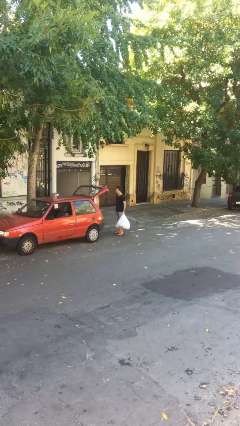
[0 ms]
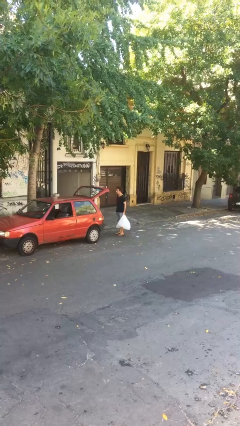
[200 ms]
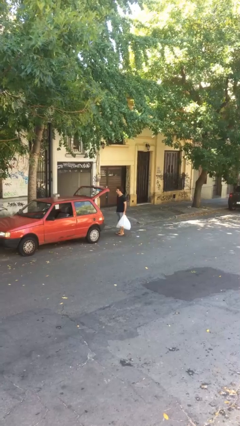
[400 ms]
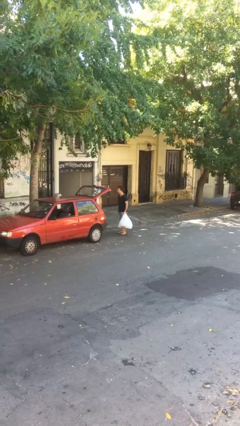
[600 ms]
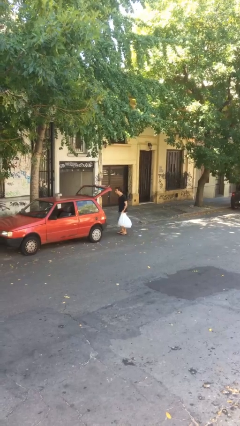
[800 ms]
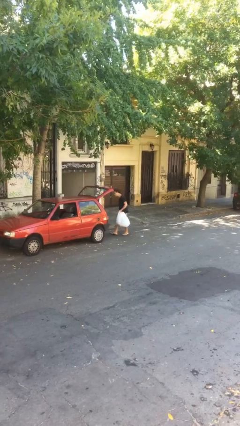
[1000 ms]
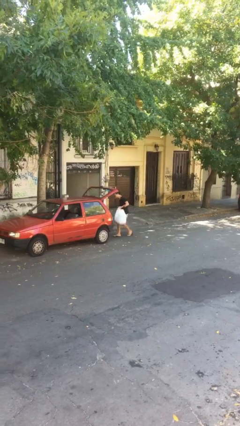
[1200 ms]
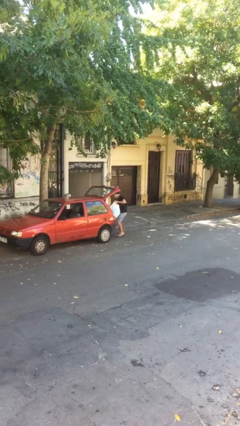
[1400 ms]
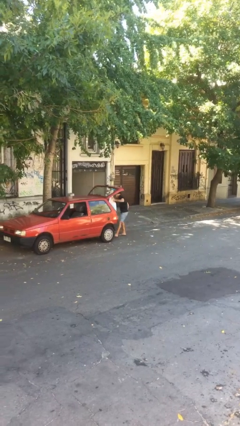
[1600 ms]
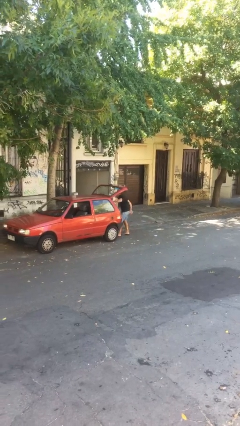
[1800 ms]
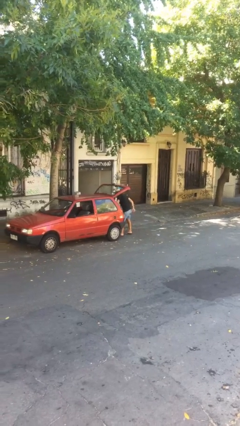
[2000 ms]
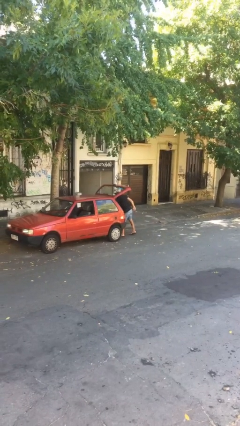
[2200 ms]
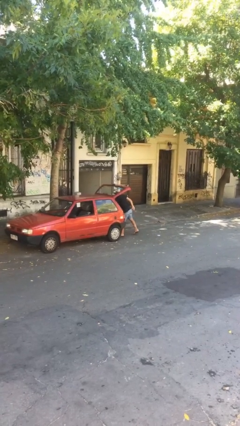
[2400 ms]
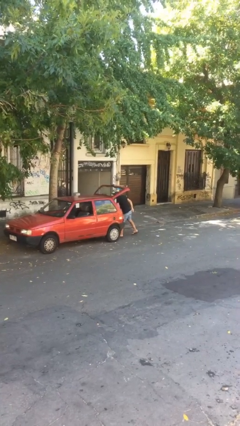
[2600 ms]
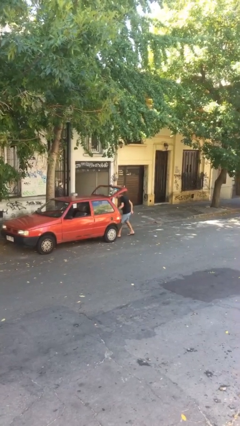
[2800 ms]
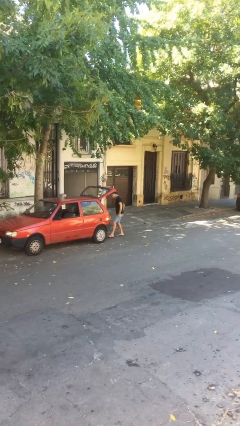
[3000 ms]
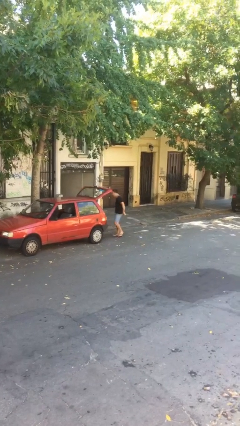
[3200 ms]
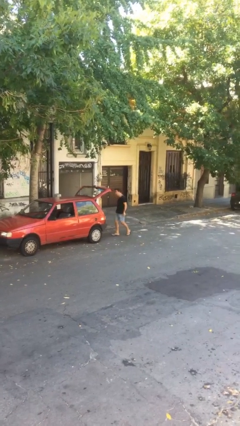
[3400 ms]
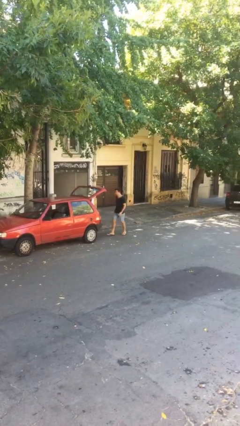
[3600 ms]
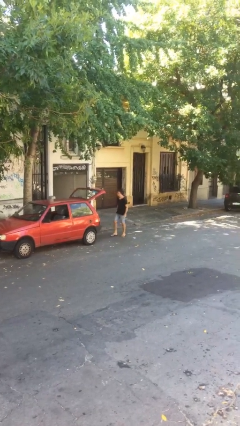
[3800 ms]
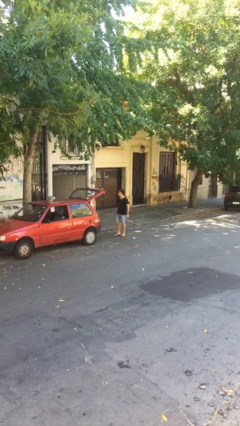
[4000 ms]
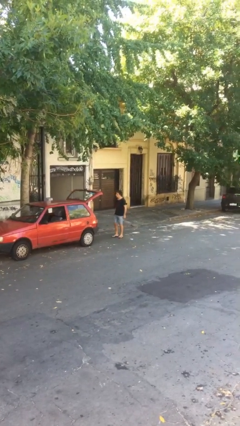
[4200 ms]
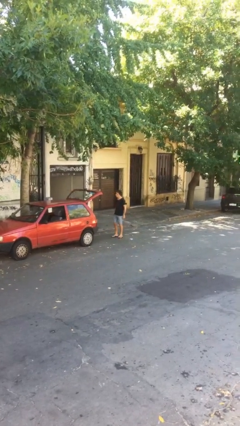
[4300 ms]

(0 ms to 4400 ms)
person loads car

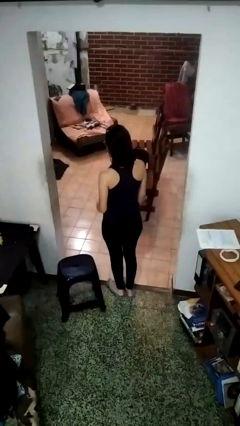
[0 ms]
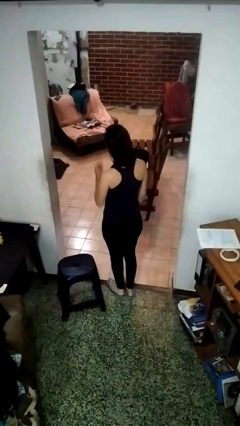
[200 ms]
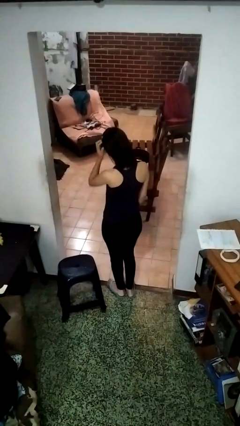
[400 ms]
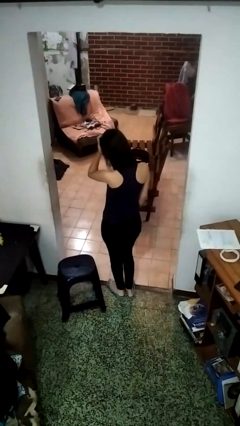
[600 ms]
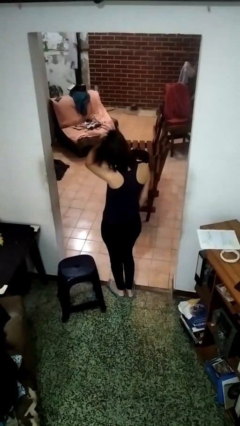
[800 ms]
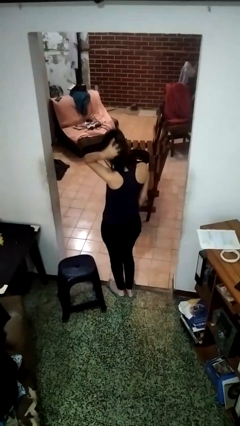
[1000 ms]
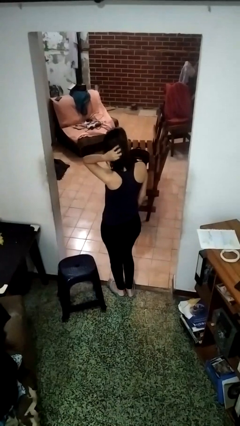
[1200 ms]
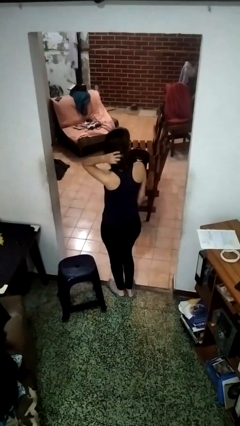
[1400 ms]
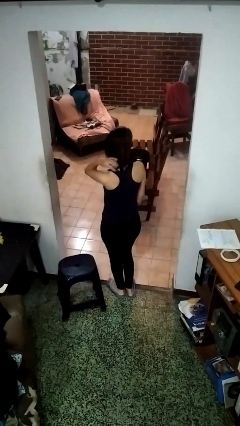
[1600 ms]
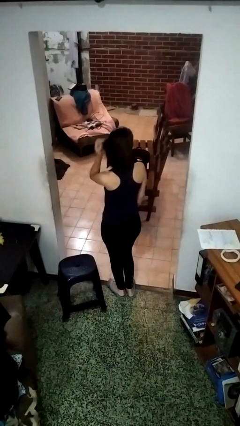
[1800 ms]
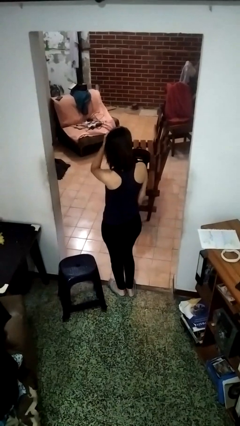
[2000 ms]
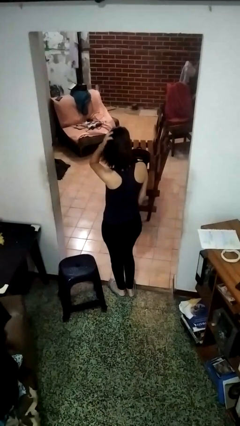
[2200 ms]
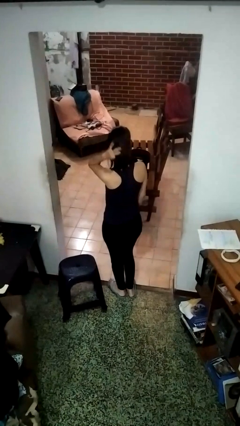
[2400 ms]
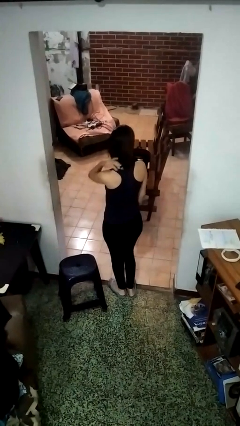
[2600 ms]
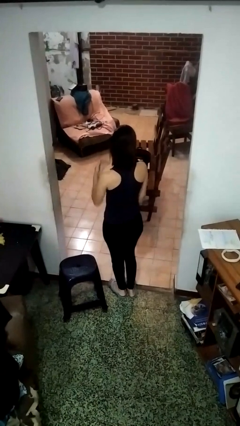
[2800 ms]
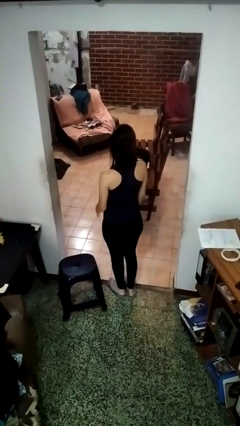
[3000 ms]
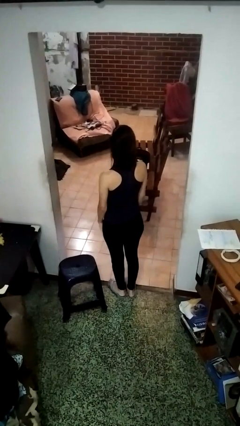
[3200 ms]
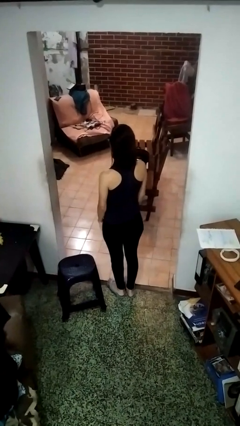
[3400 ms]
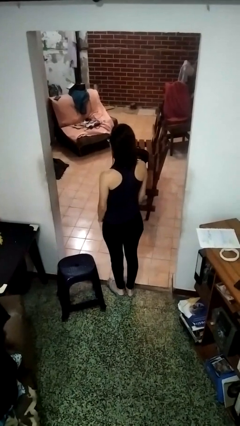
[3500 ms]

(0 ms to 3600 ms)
person strokes hair

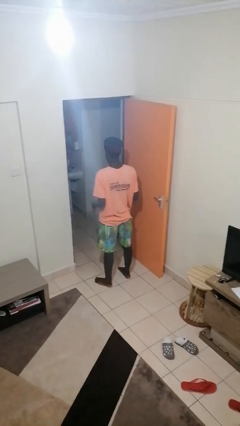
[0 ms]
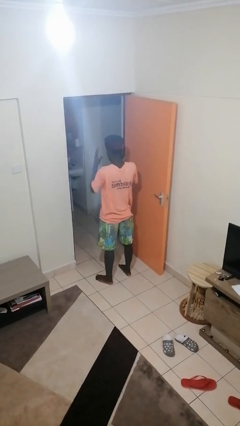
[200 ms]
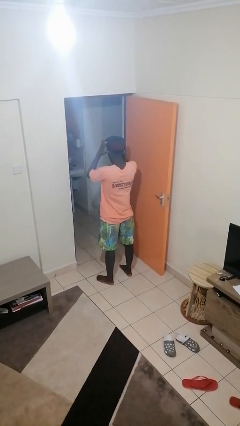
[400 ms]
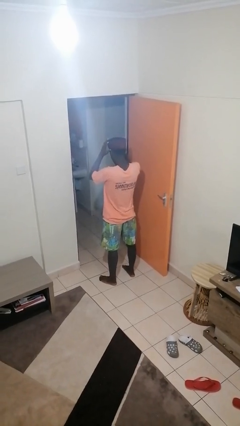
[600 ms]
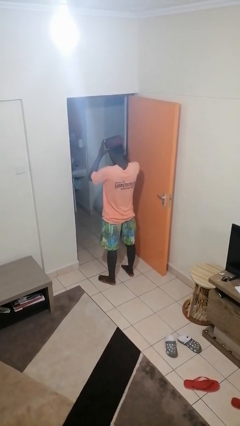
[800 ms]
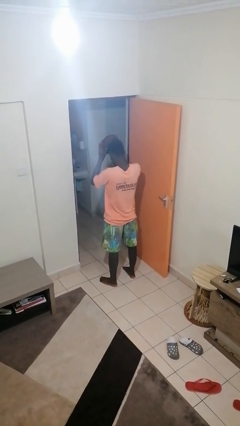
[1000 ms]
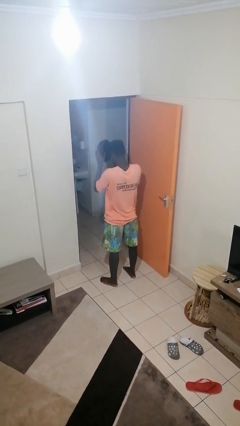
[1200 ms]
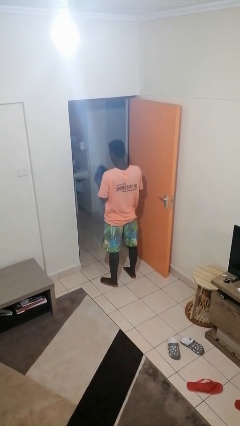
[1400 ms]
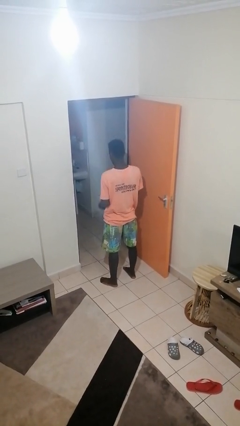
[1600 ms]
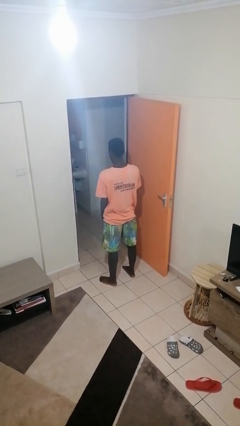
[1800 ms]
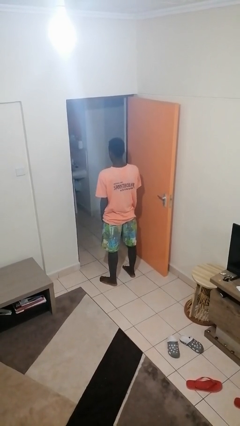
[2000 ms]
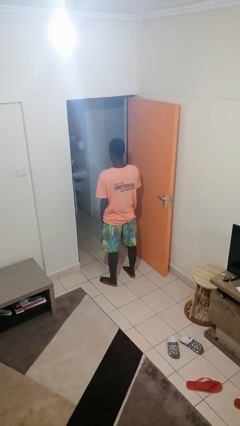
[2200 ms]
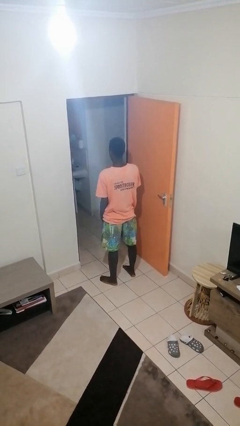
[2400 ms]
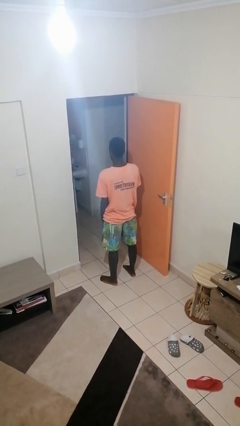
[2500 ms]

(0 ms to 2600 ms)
person takes off hat

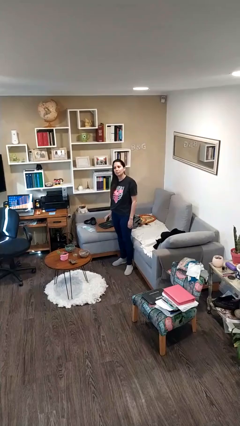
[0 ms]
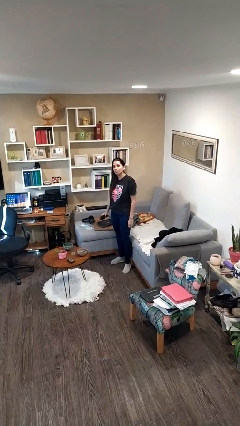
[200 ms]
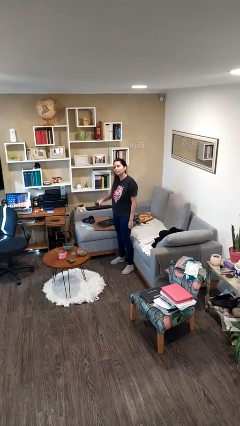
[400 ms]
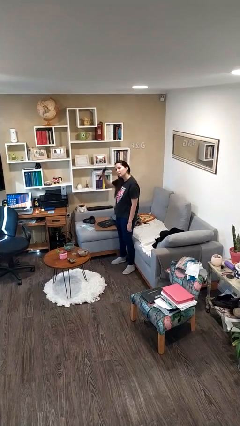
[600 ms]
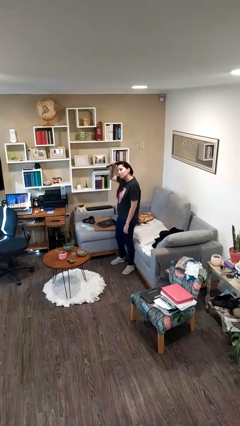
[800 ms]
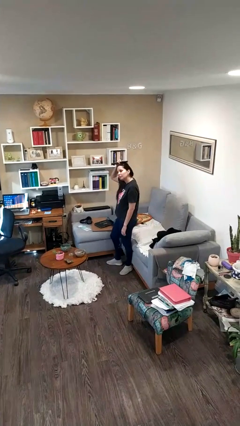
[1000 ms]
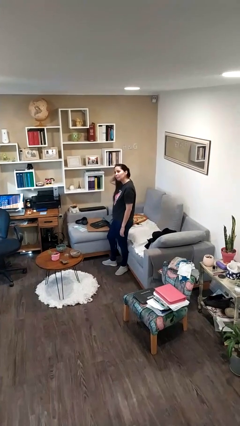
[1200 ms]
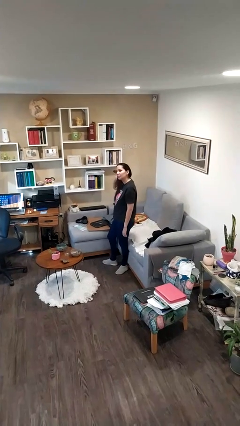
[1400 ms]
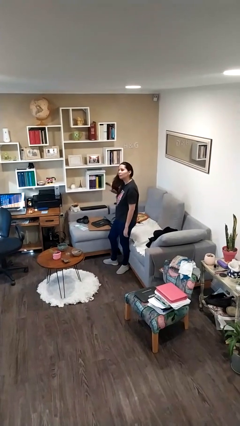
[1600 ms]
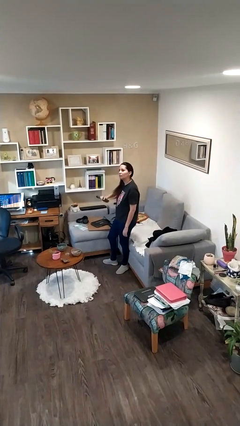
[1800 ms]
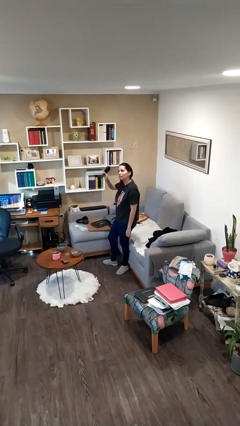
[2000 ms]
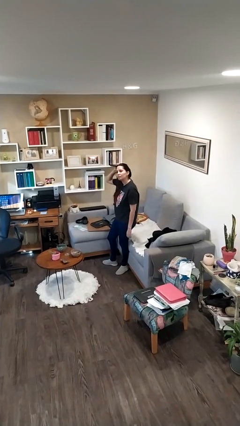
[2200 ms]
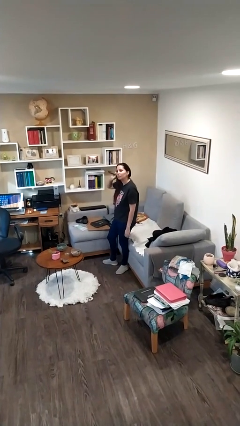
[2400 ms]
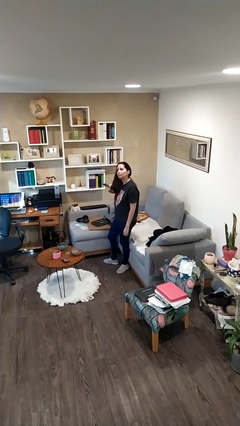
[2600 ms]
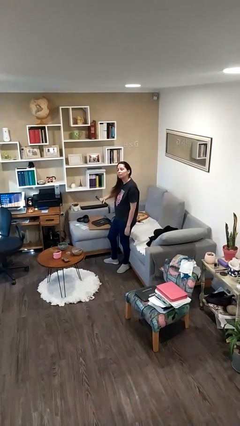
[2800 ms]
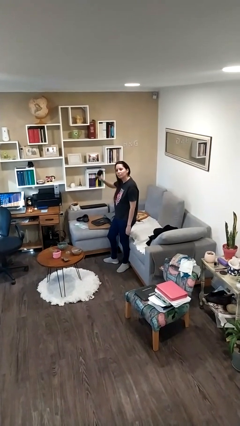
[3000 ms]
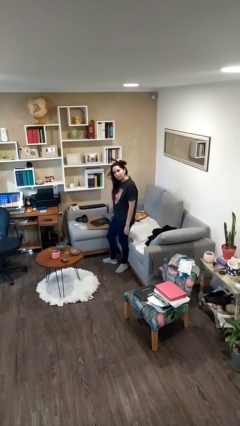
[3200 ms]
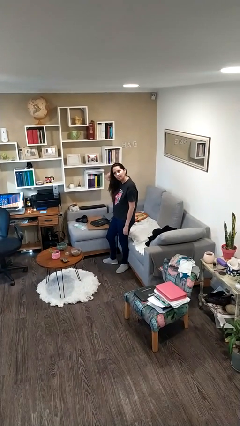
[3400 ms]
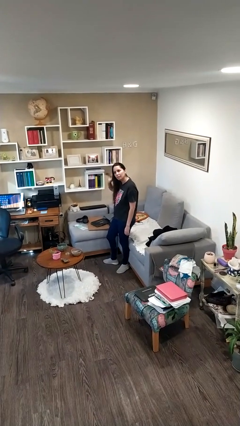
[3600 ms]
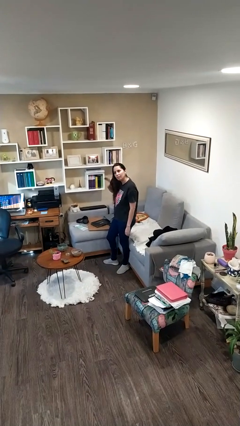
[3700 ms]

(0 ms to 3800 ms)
person brushes hair

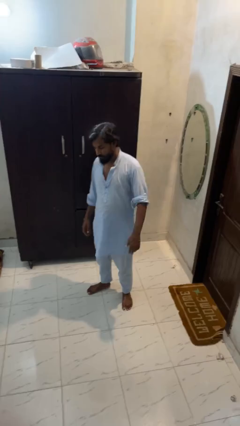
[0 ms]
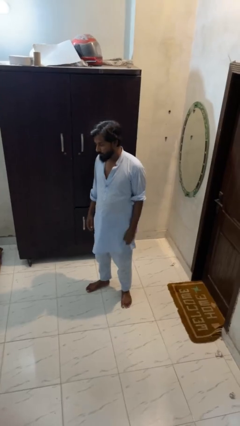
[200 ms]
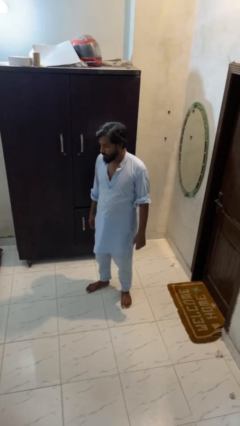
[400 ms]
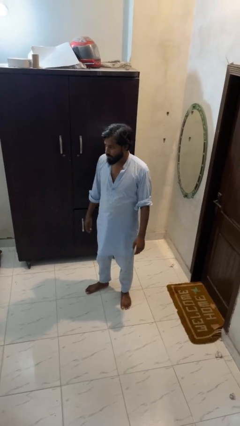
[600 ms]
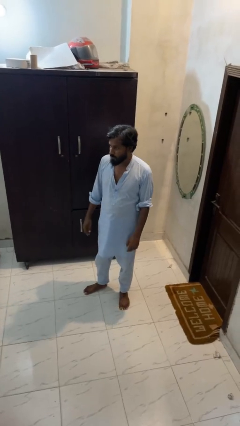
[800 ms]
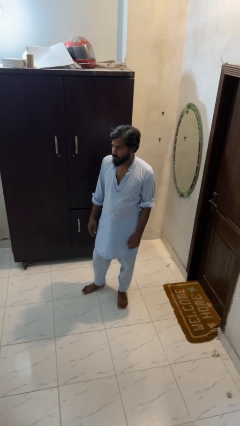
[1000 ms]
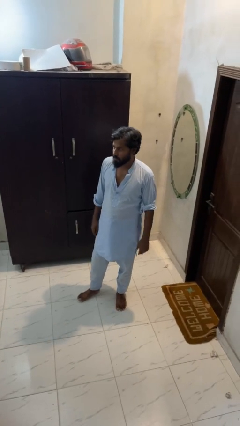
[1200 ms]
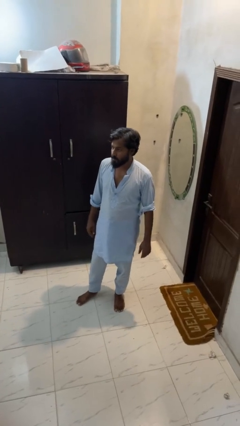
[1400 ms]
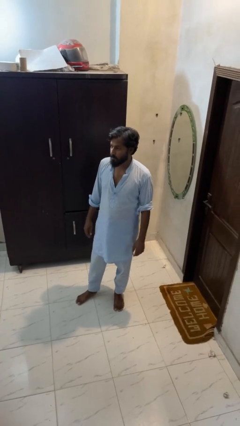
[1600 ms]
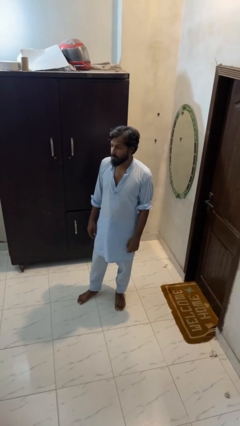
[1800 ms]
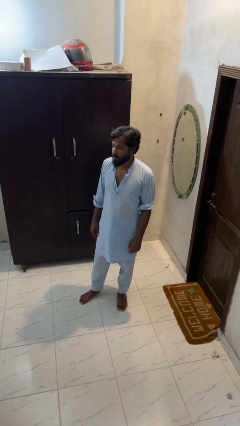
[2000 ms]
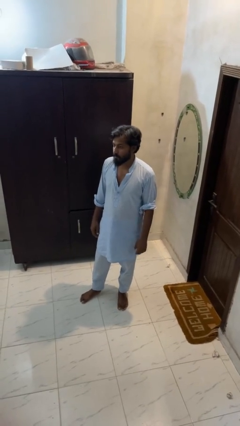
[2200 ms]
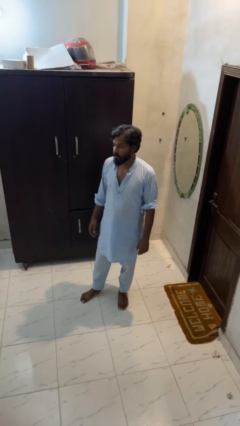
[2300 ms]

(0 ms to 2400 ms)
person gestures lower hand

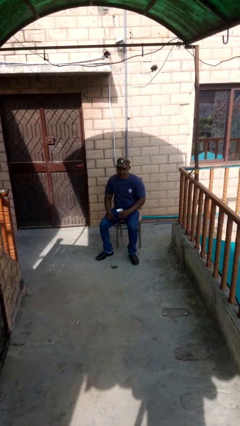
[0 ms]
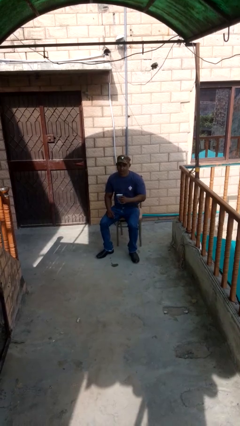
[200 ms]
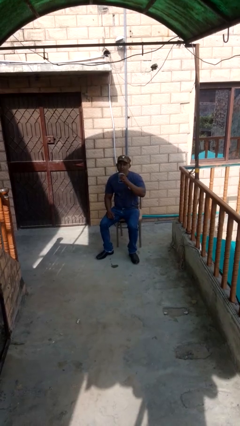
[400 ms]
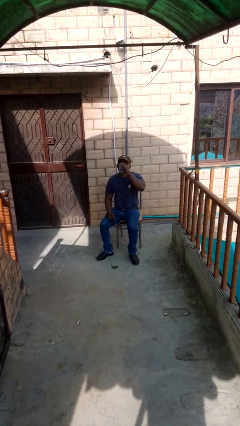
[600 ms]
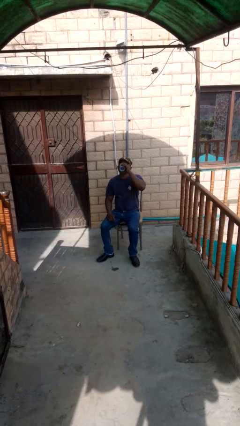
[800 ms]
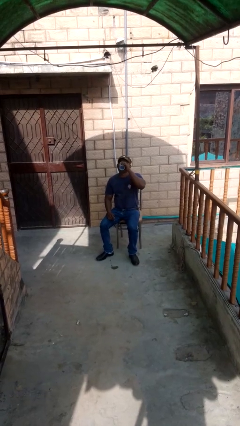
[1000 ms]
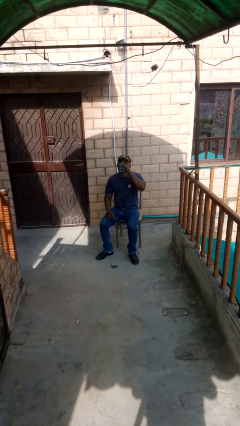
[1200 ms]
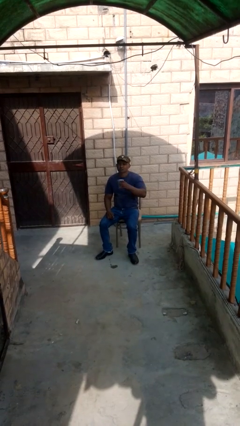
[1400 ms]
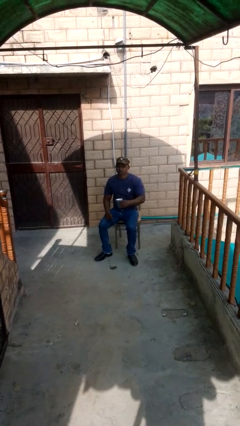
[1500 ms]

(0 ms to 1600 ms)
person drinks from mug
